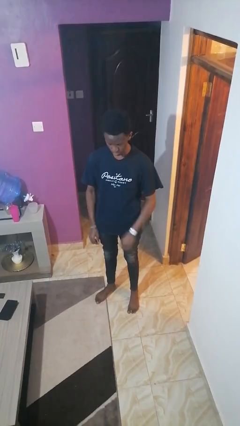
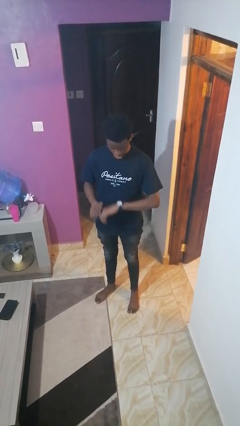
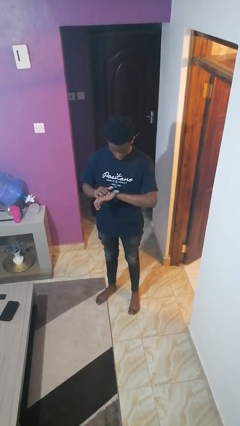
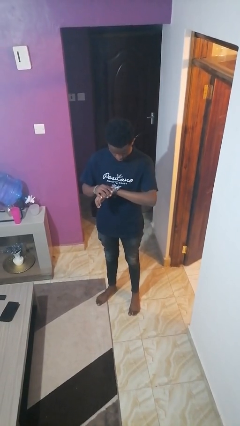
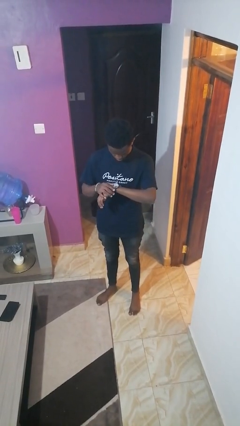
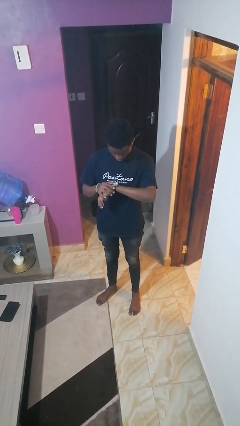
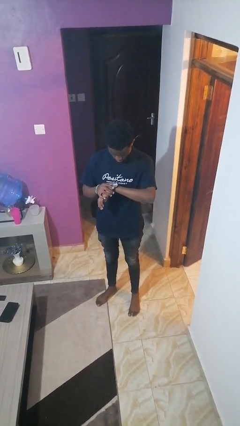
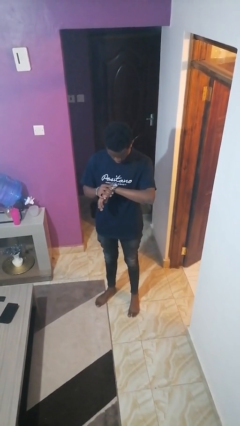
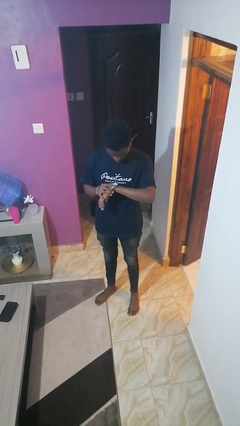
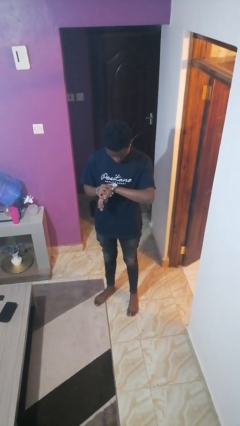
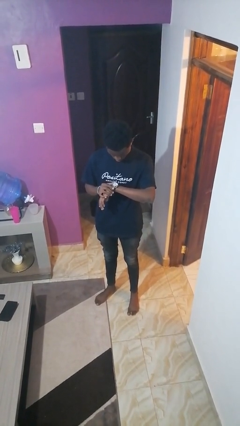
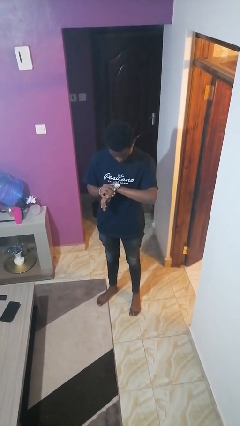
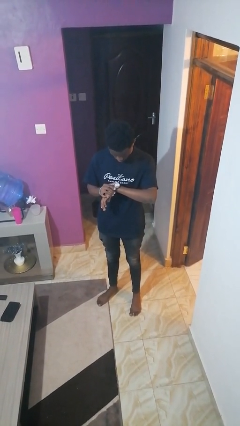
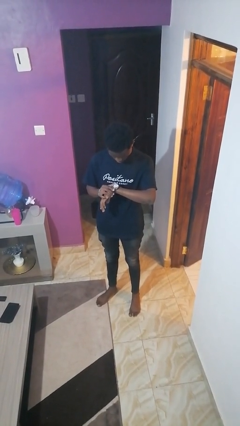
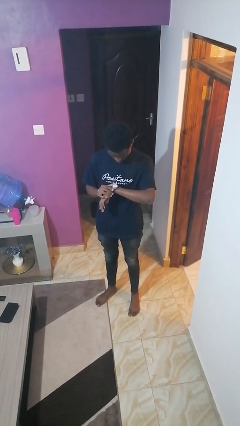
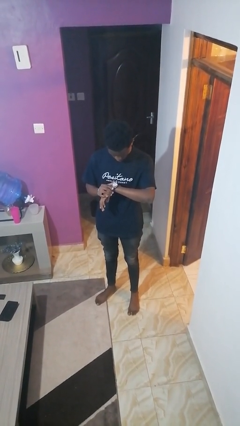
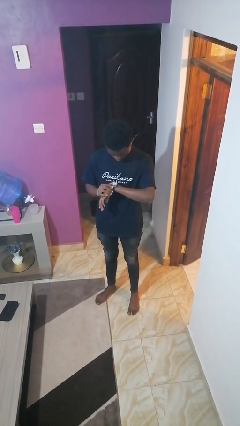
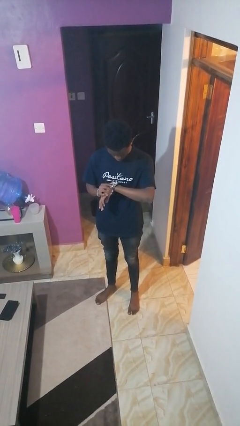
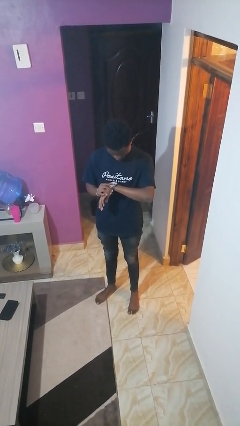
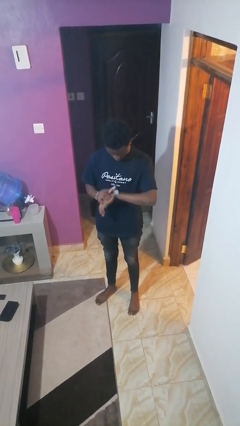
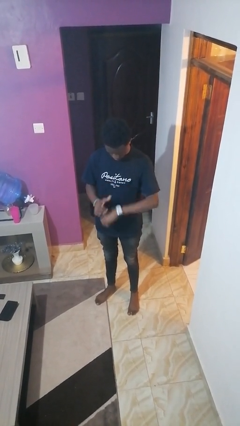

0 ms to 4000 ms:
person looks at wristwatch

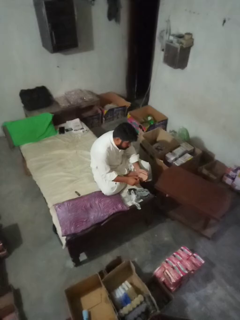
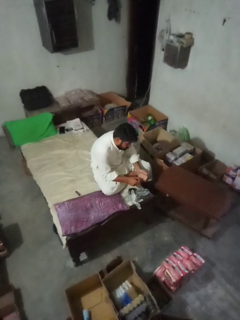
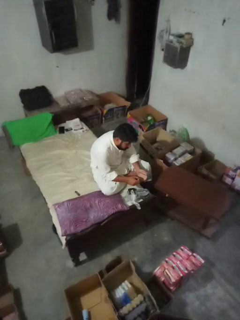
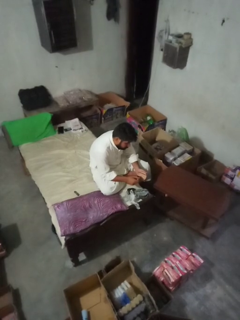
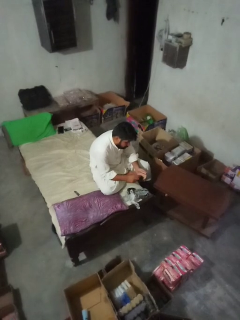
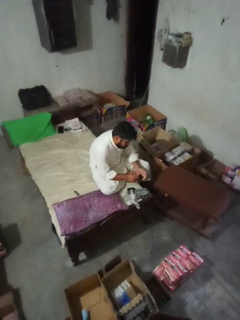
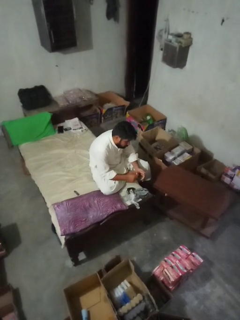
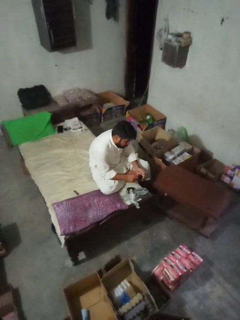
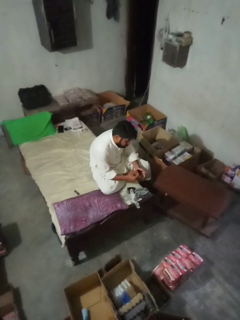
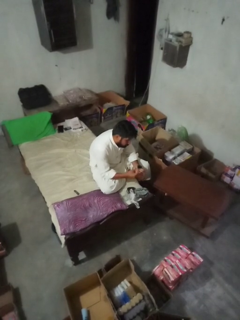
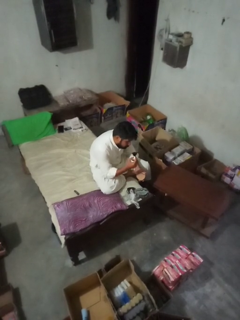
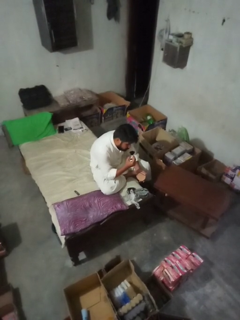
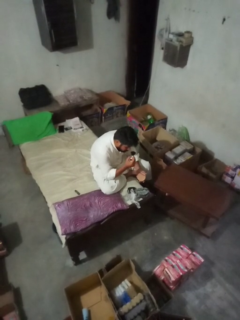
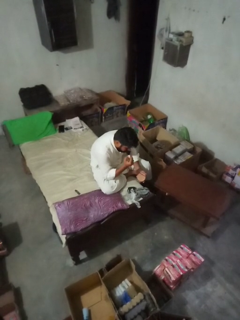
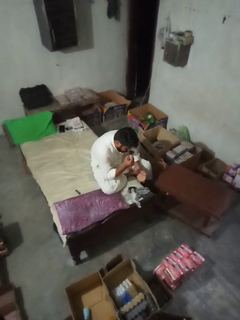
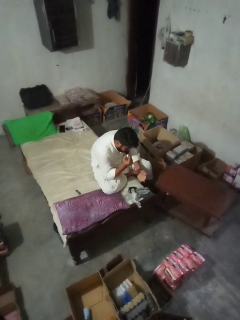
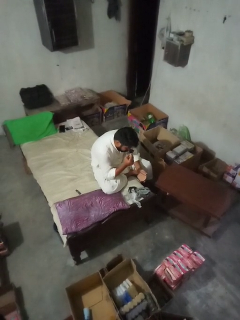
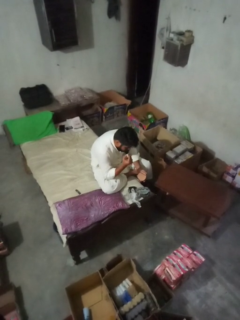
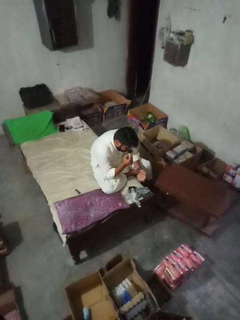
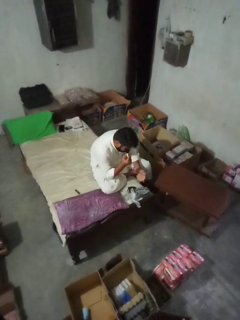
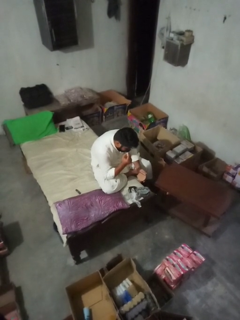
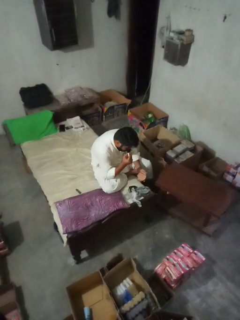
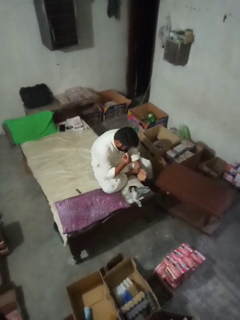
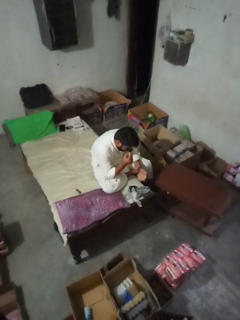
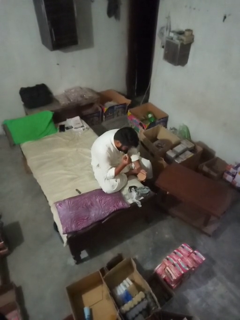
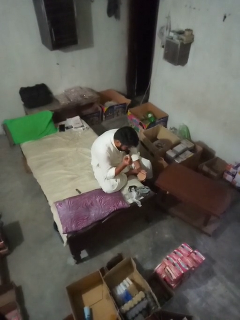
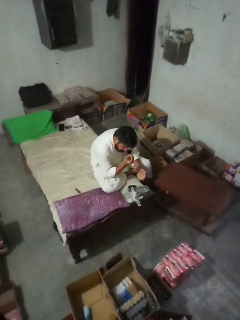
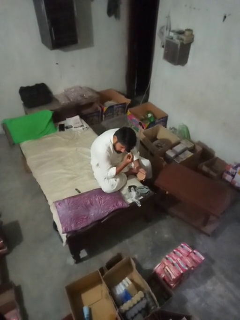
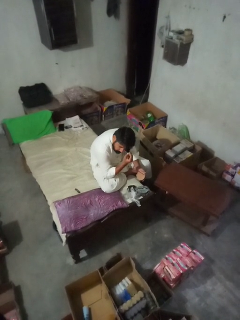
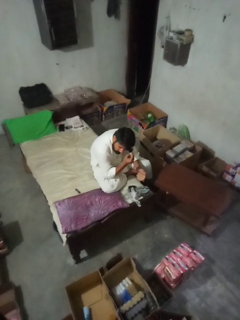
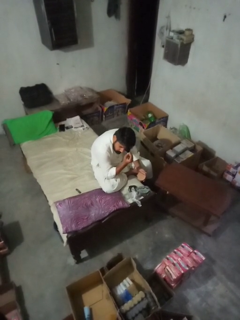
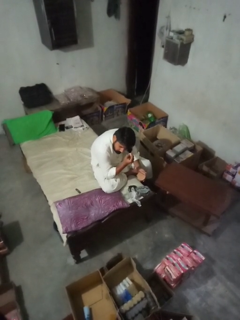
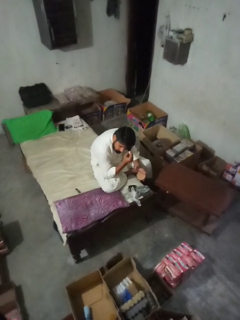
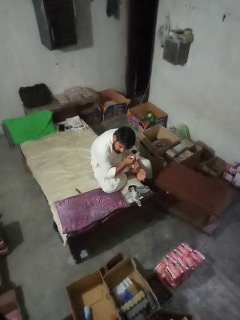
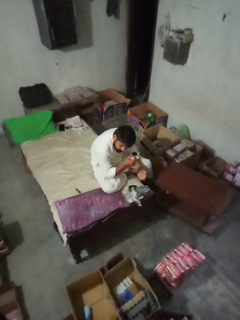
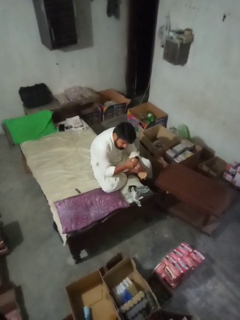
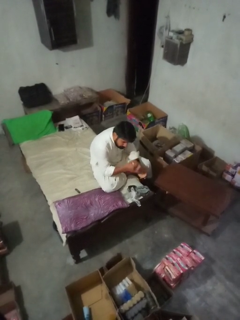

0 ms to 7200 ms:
person applies eye makeup

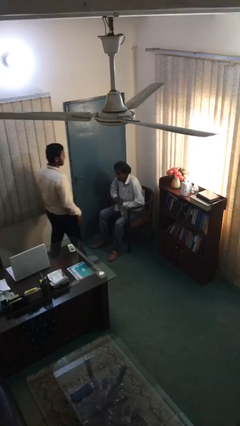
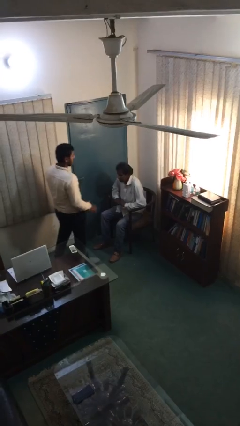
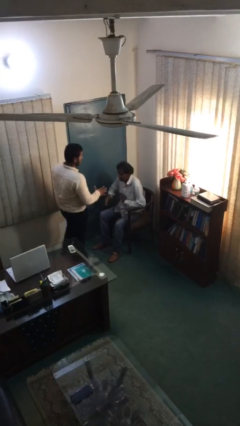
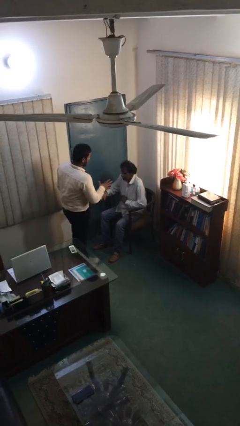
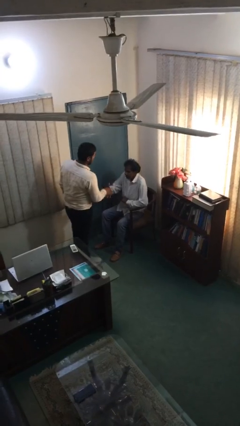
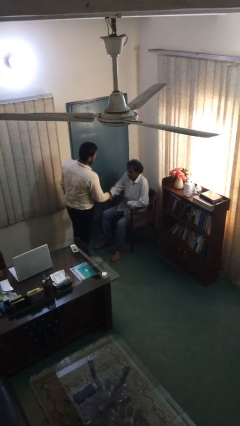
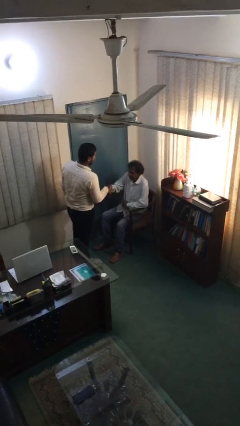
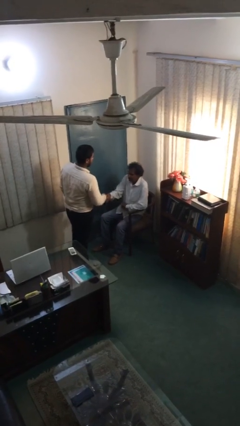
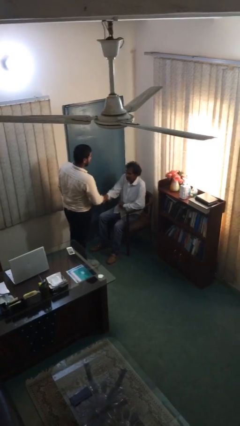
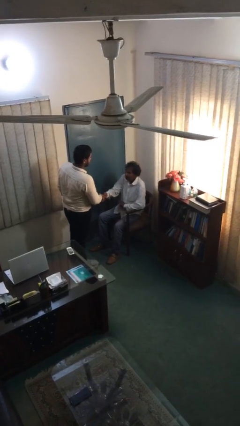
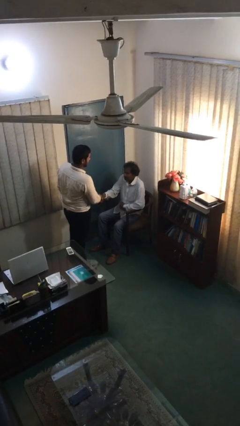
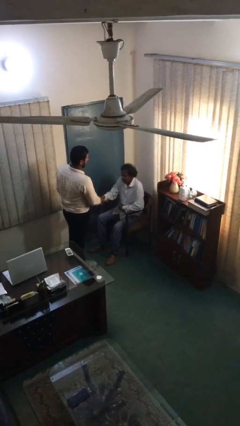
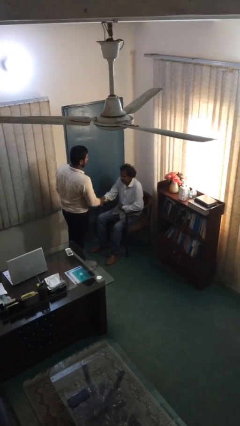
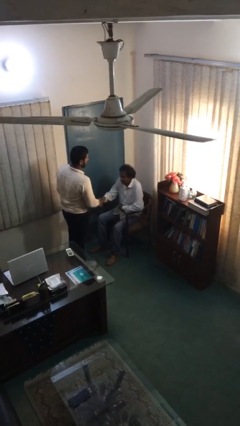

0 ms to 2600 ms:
person shakes hand

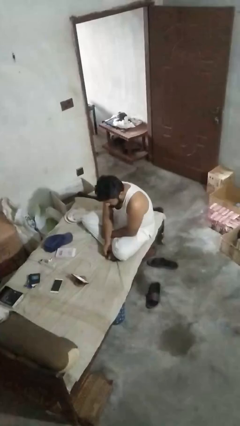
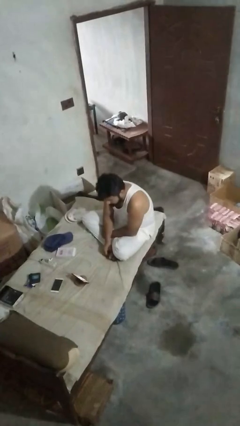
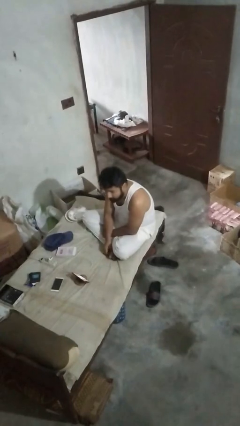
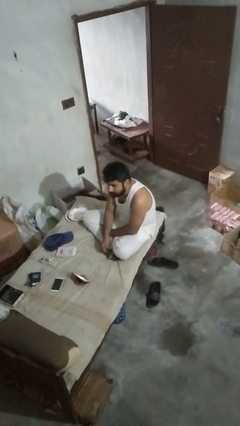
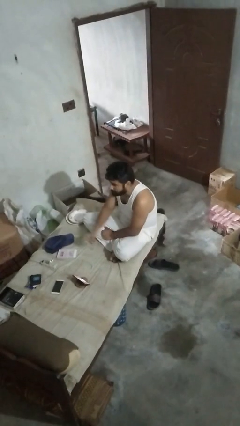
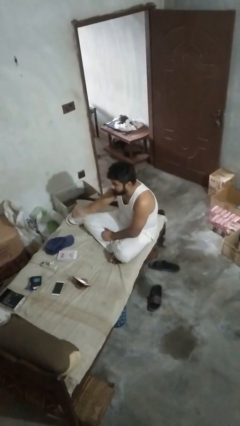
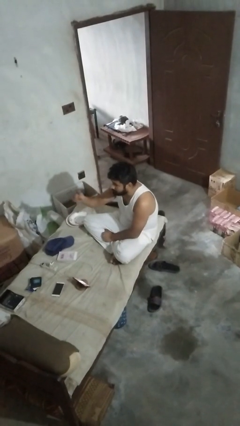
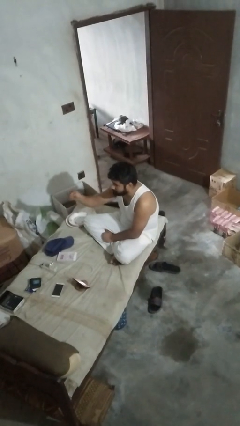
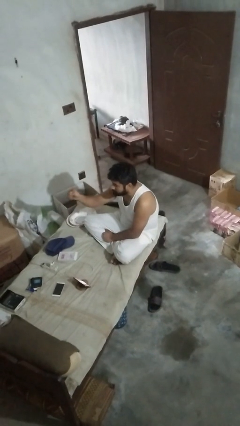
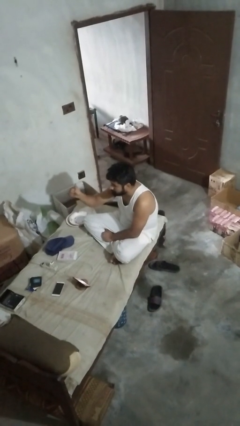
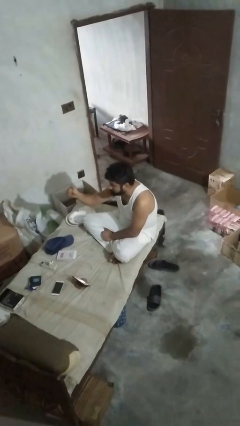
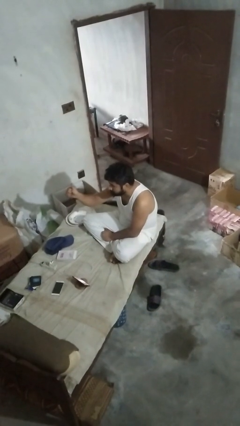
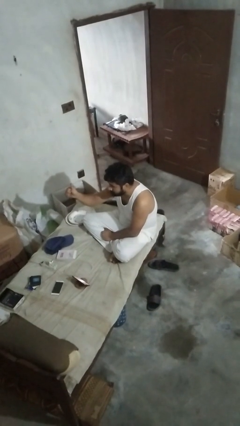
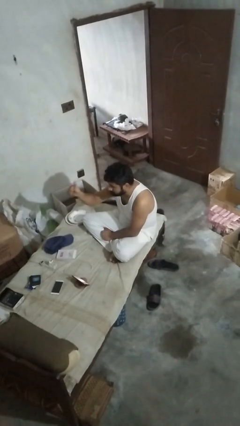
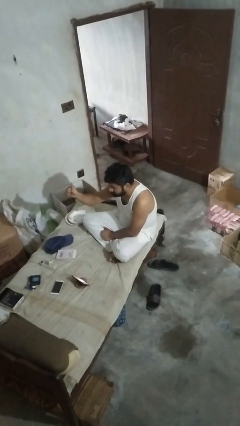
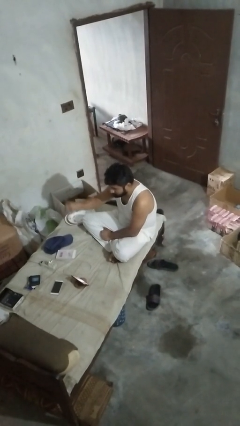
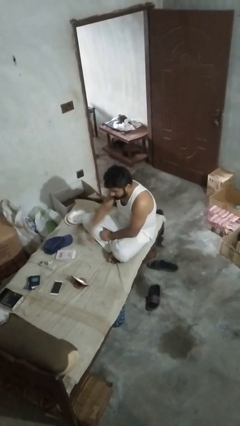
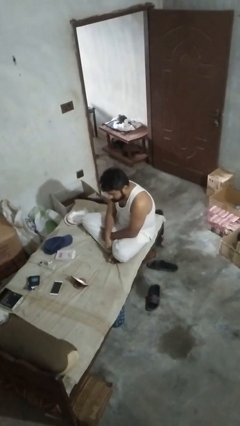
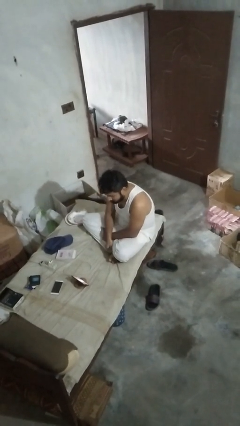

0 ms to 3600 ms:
person gestures thumbs up

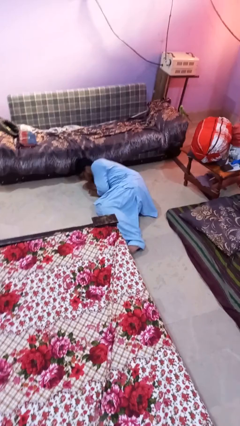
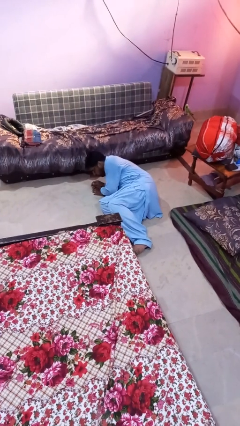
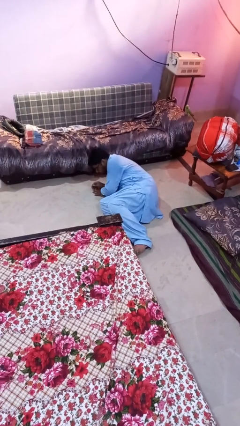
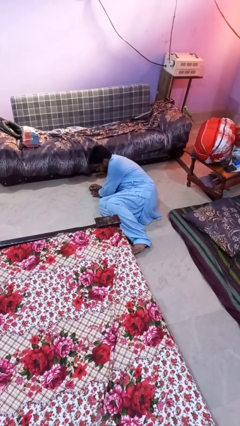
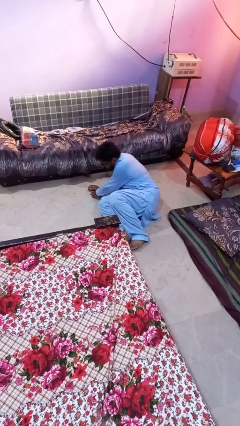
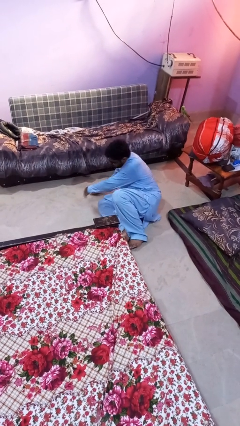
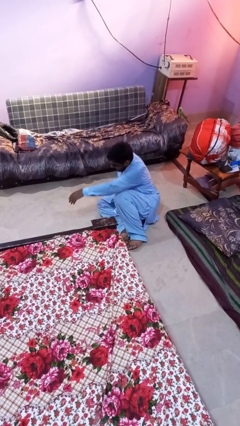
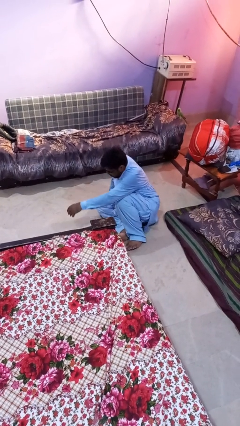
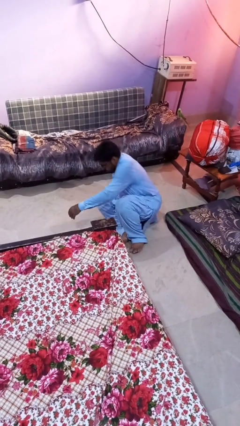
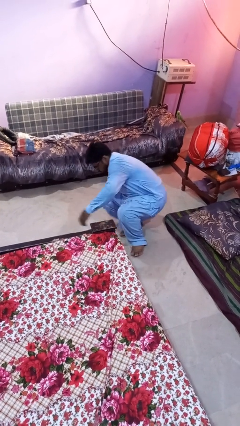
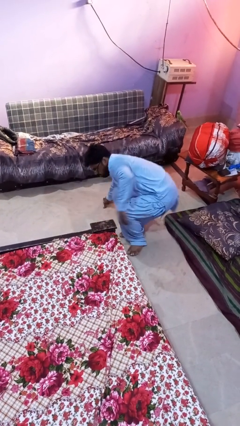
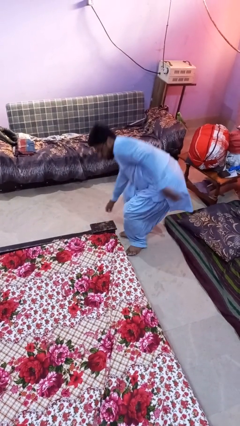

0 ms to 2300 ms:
person stands up from floor
